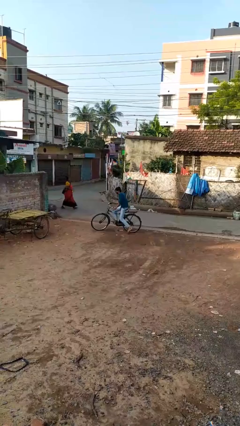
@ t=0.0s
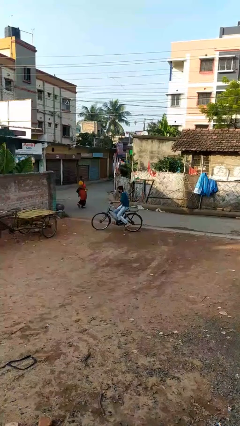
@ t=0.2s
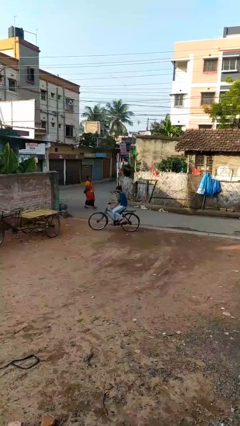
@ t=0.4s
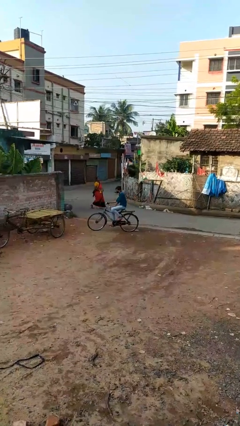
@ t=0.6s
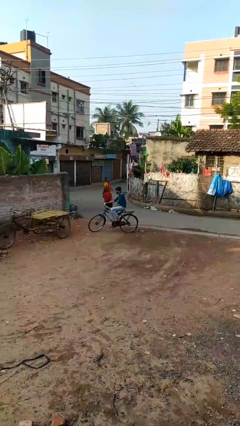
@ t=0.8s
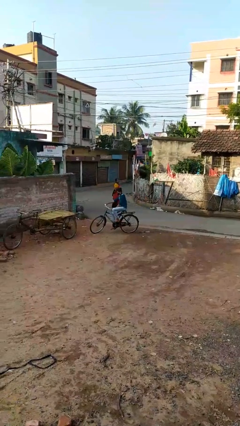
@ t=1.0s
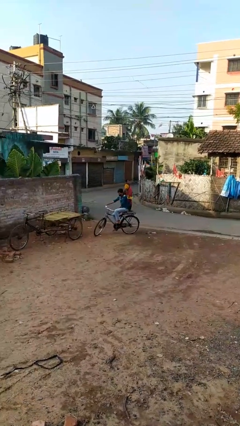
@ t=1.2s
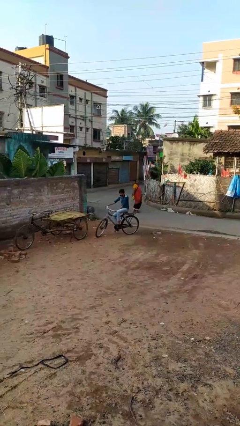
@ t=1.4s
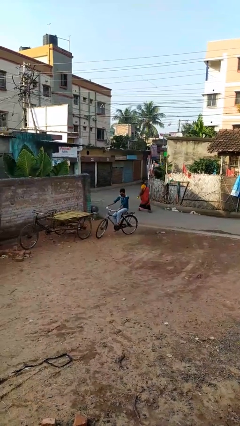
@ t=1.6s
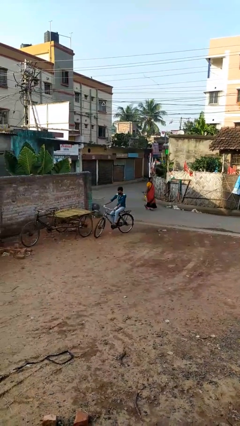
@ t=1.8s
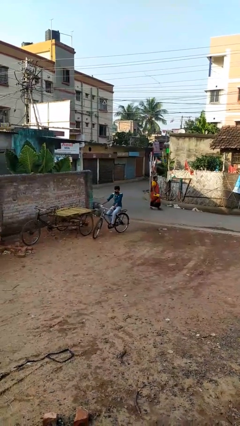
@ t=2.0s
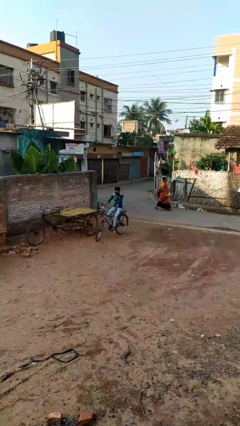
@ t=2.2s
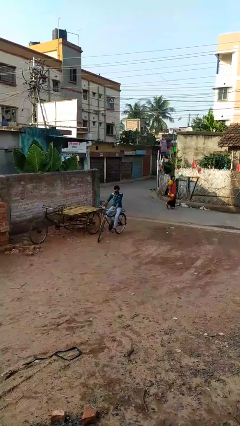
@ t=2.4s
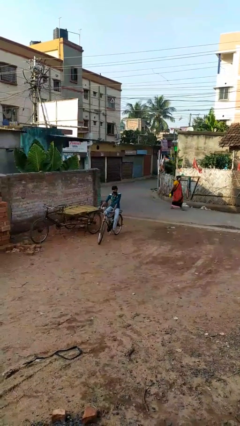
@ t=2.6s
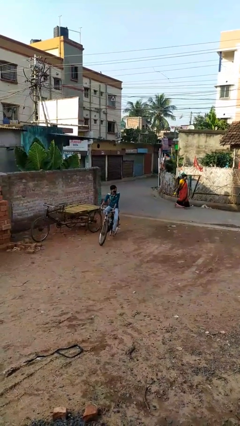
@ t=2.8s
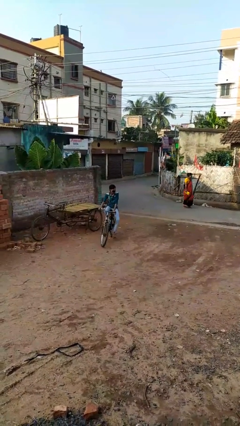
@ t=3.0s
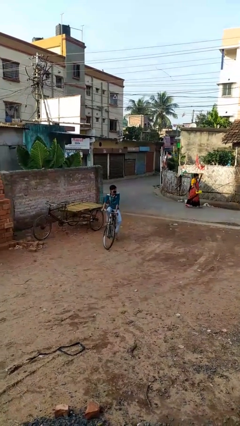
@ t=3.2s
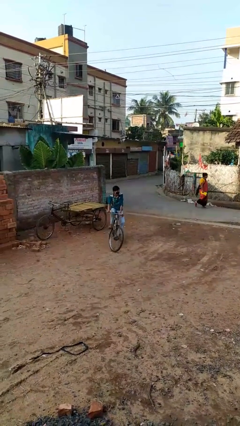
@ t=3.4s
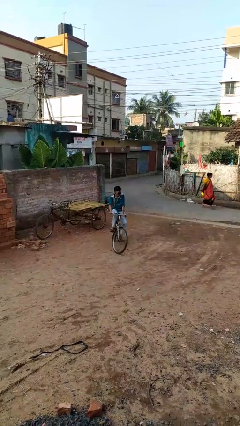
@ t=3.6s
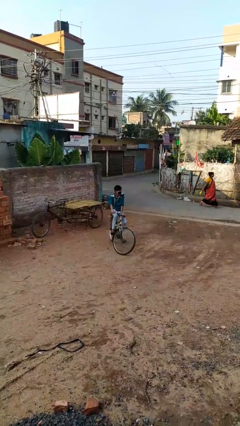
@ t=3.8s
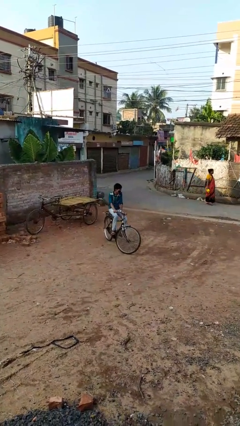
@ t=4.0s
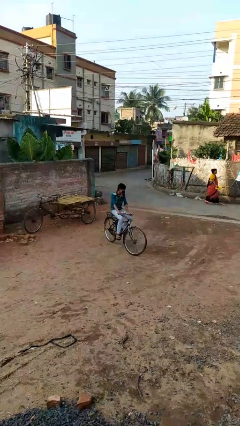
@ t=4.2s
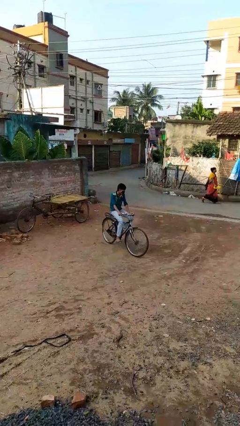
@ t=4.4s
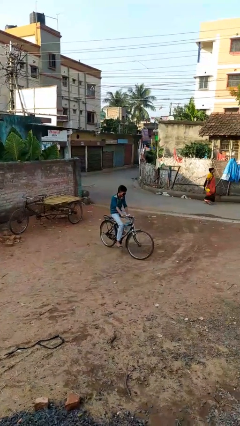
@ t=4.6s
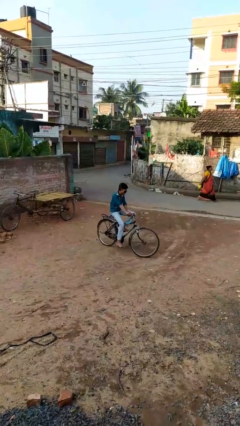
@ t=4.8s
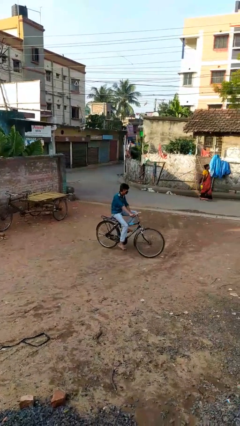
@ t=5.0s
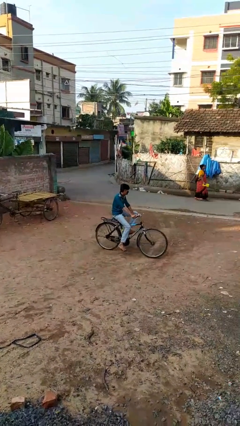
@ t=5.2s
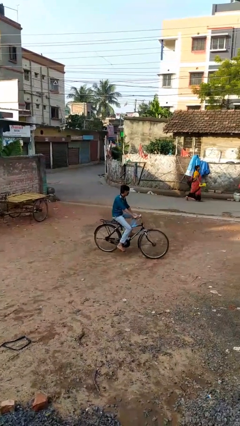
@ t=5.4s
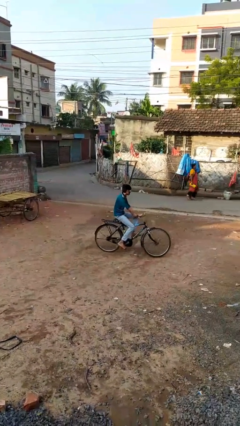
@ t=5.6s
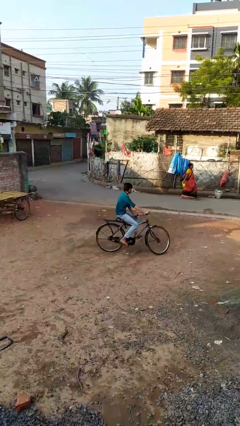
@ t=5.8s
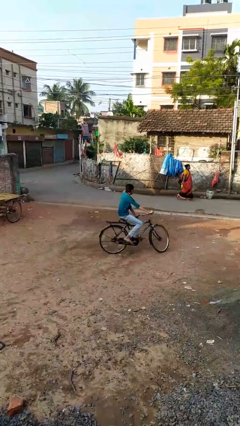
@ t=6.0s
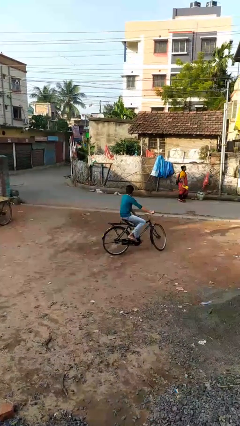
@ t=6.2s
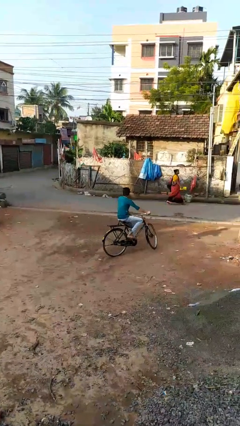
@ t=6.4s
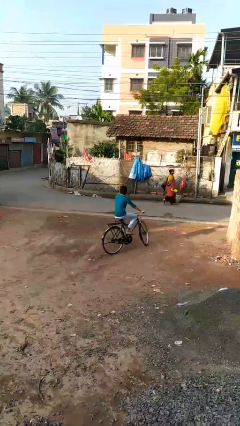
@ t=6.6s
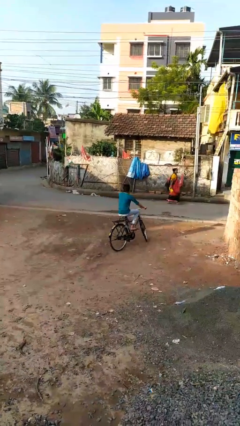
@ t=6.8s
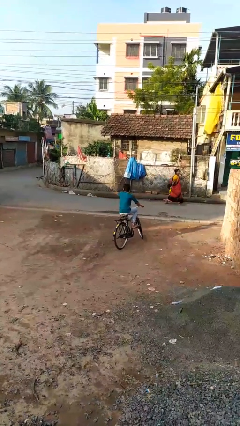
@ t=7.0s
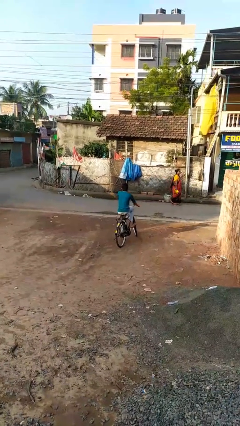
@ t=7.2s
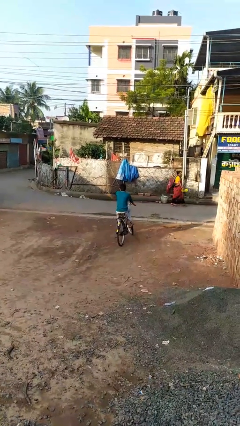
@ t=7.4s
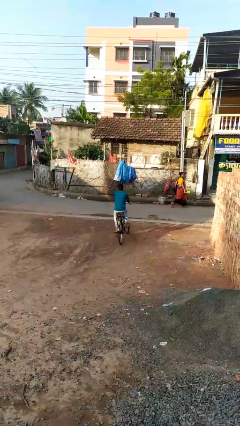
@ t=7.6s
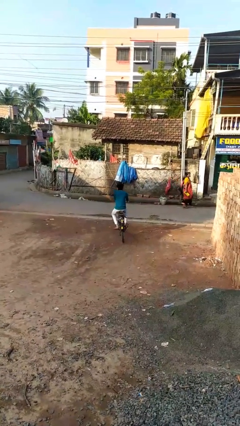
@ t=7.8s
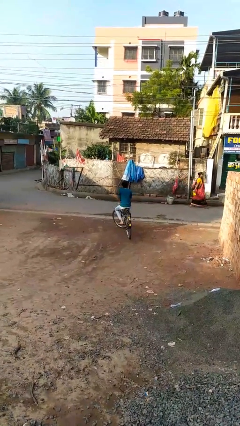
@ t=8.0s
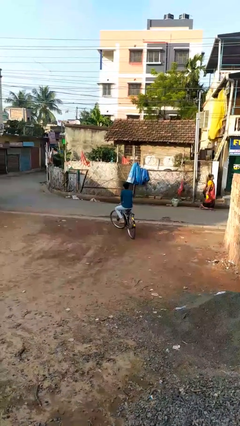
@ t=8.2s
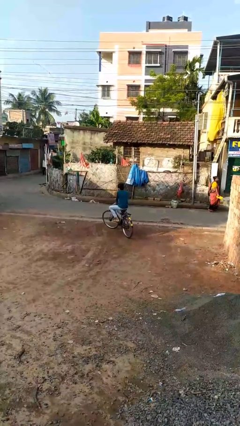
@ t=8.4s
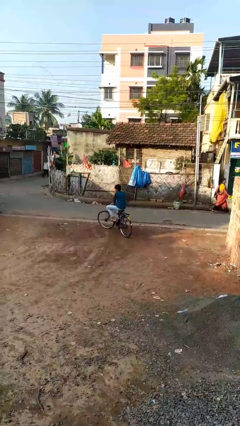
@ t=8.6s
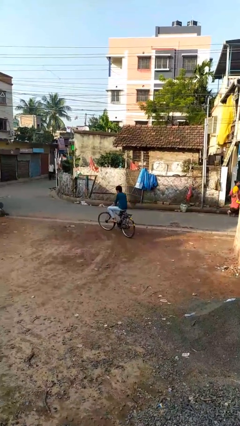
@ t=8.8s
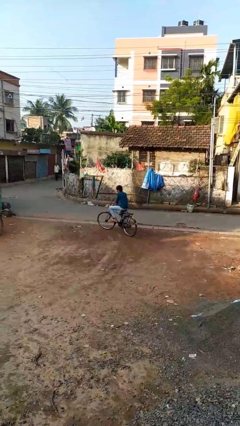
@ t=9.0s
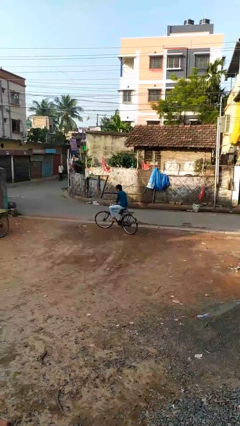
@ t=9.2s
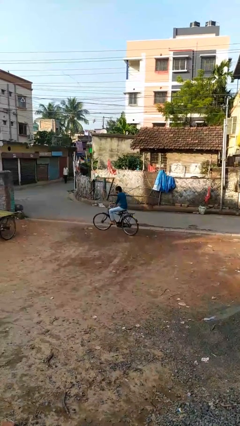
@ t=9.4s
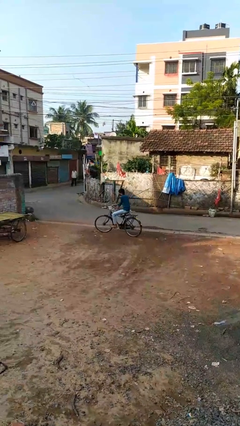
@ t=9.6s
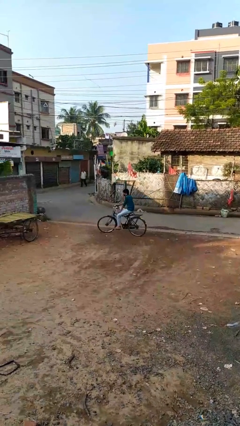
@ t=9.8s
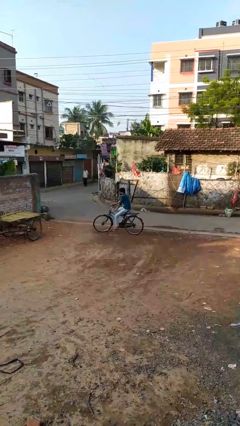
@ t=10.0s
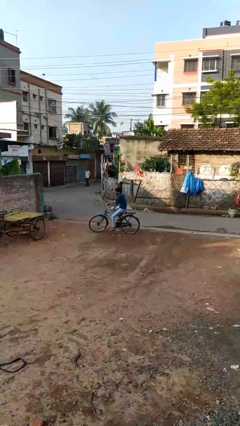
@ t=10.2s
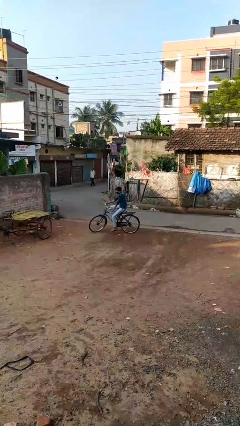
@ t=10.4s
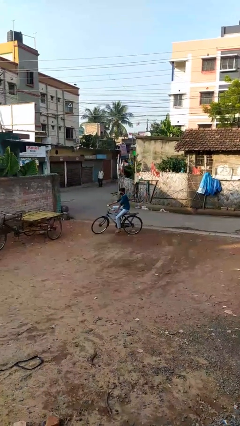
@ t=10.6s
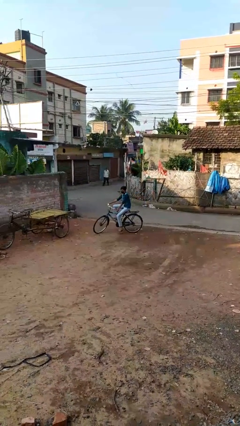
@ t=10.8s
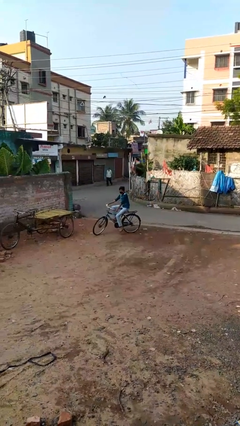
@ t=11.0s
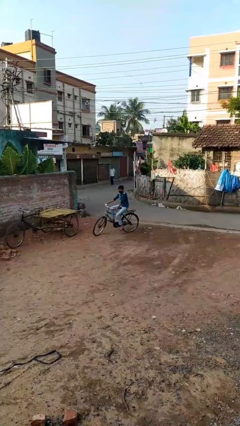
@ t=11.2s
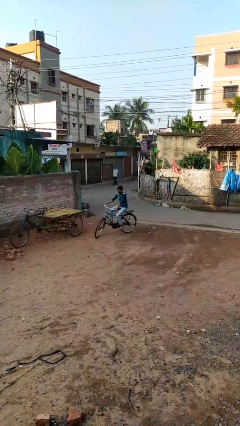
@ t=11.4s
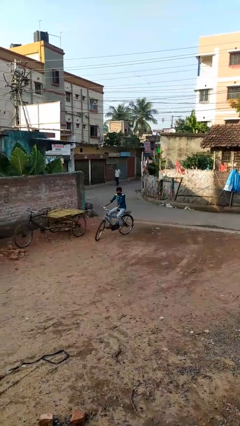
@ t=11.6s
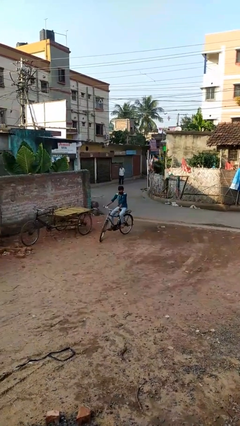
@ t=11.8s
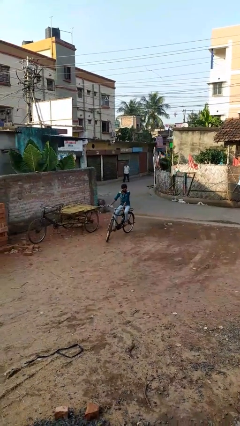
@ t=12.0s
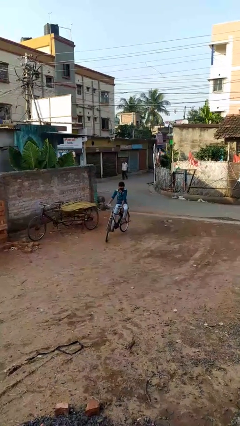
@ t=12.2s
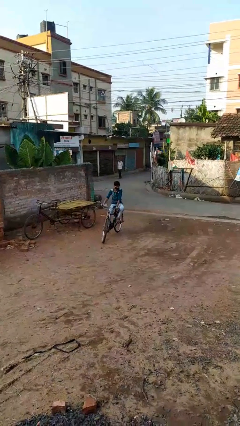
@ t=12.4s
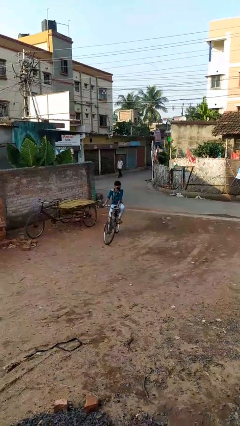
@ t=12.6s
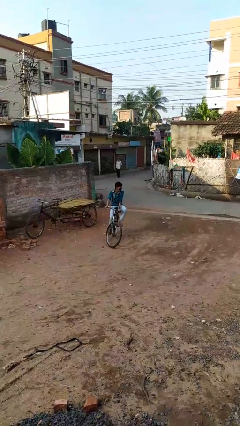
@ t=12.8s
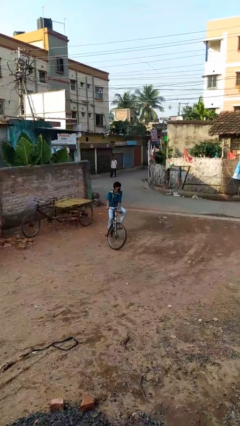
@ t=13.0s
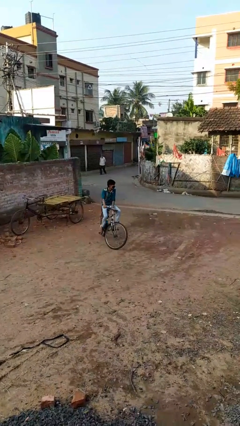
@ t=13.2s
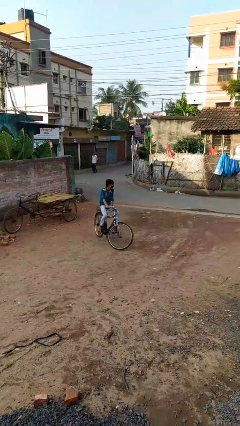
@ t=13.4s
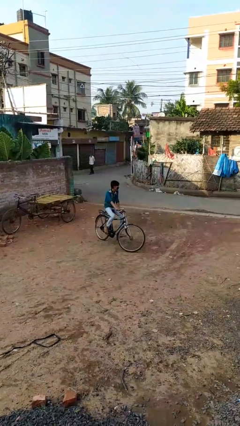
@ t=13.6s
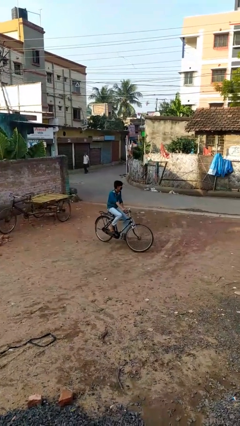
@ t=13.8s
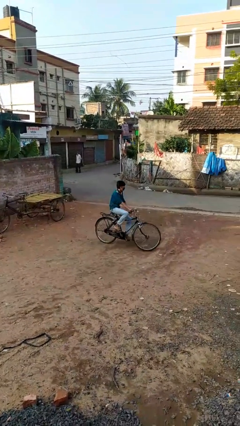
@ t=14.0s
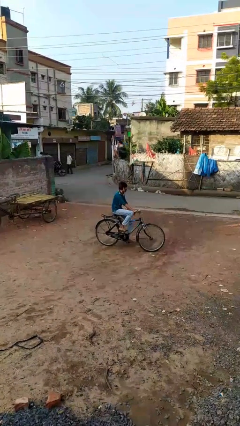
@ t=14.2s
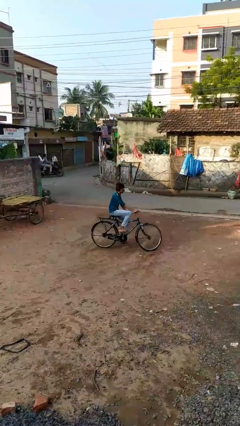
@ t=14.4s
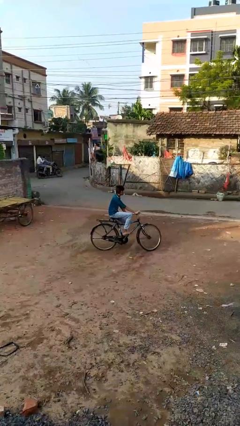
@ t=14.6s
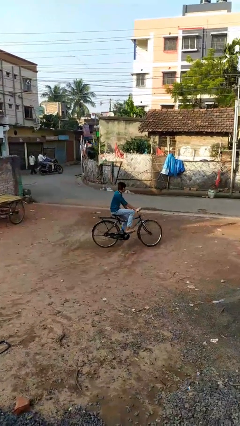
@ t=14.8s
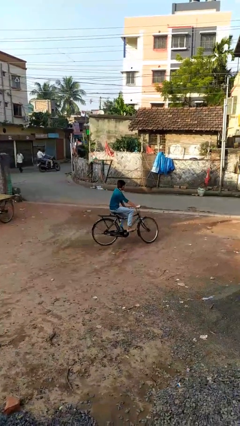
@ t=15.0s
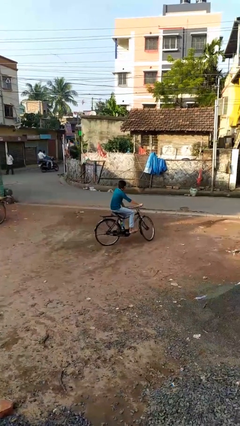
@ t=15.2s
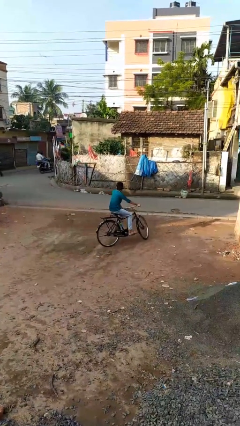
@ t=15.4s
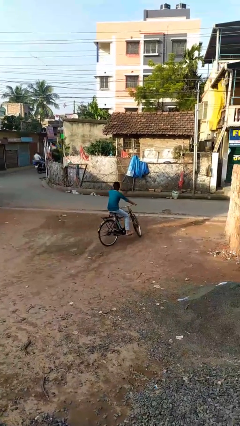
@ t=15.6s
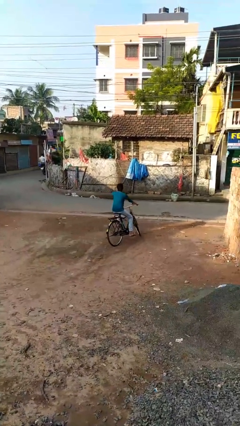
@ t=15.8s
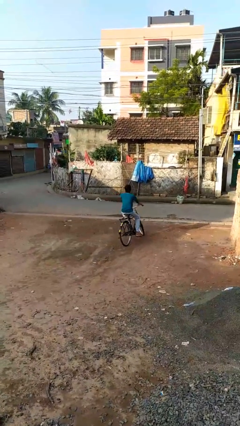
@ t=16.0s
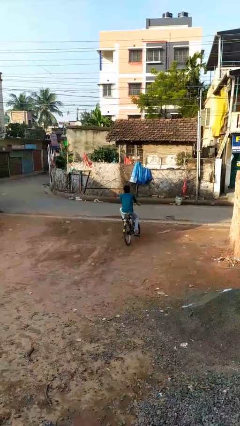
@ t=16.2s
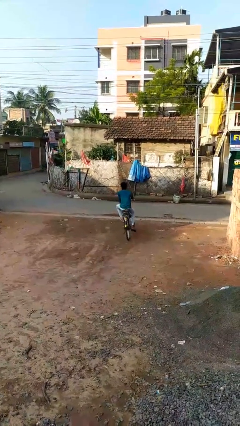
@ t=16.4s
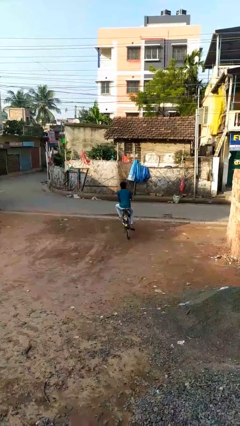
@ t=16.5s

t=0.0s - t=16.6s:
person rides bicycle

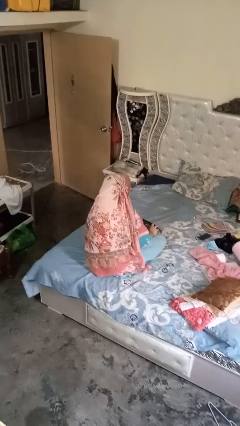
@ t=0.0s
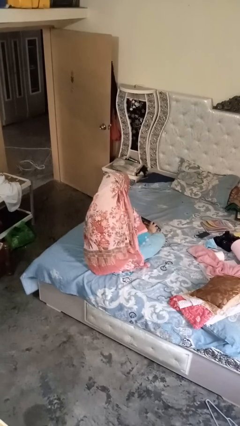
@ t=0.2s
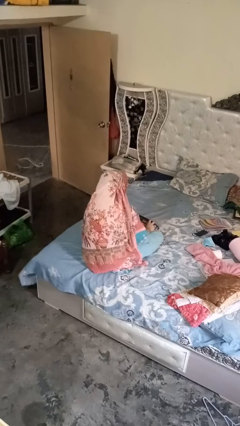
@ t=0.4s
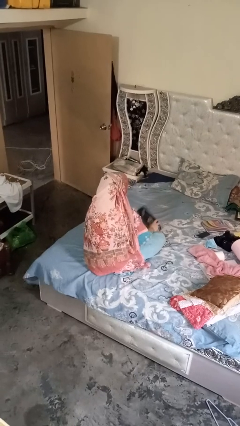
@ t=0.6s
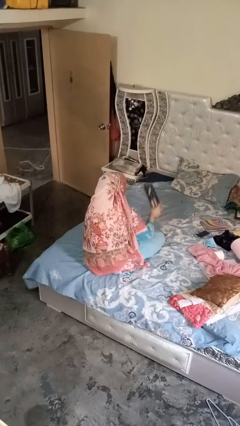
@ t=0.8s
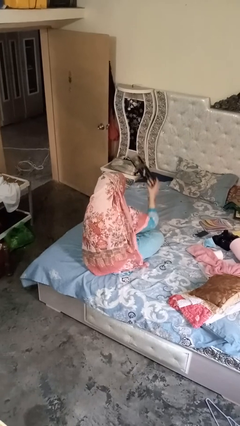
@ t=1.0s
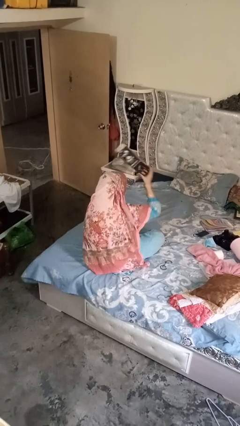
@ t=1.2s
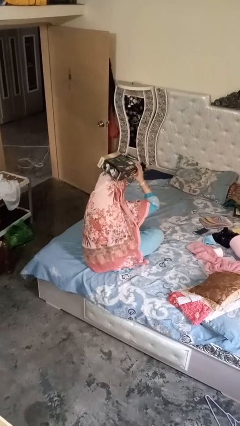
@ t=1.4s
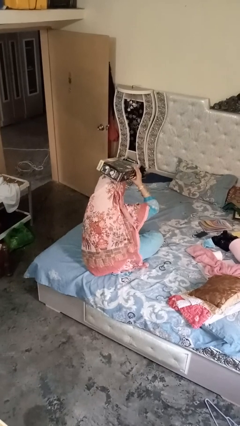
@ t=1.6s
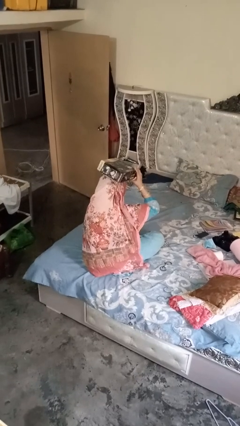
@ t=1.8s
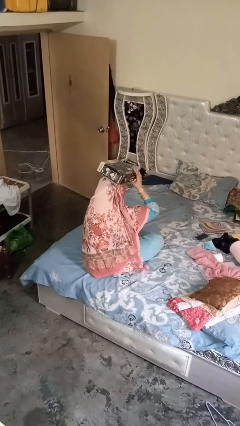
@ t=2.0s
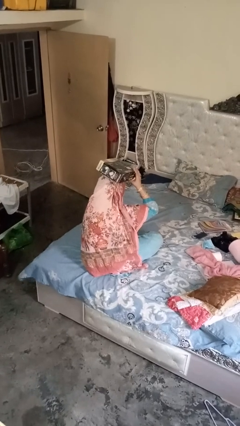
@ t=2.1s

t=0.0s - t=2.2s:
person holds object above head
